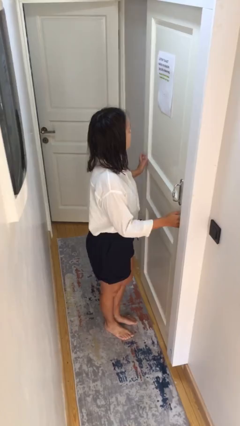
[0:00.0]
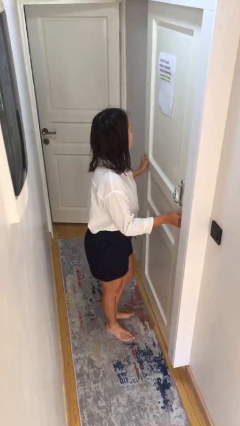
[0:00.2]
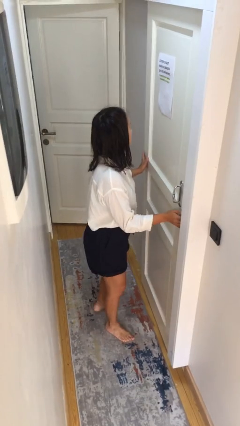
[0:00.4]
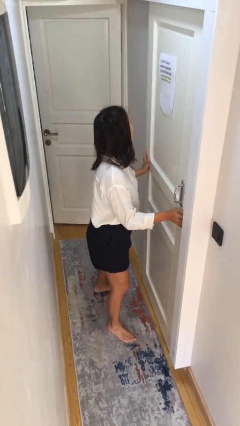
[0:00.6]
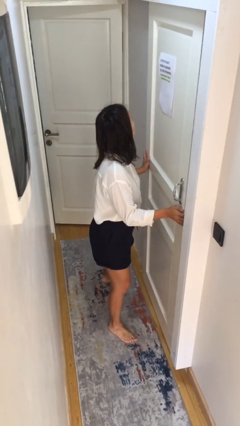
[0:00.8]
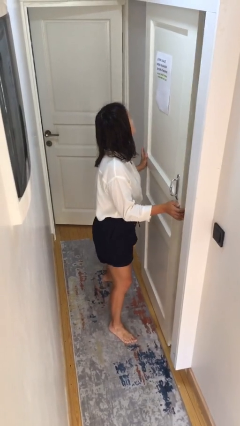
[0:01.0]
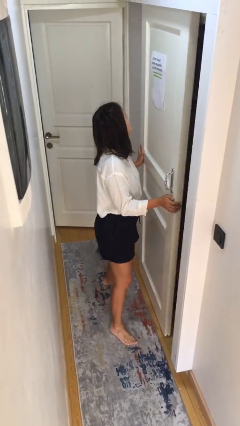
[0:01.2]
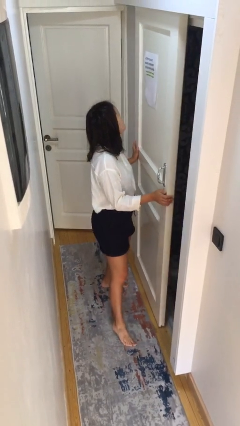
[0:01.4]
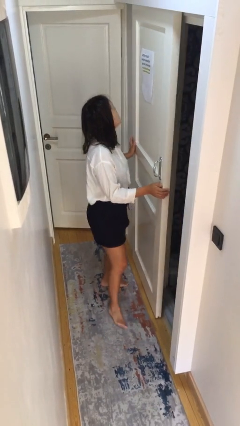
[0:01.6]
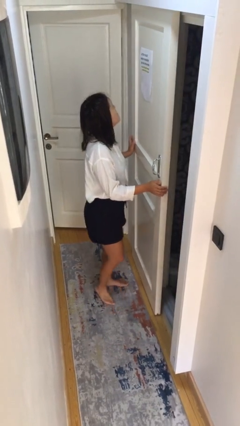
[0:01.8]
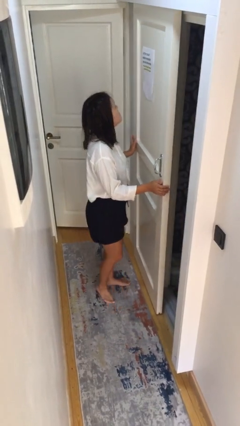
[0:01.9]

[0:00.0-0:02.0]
person opens sliding door

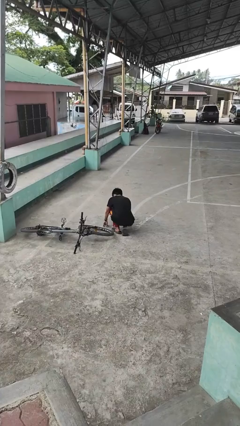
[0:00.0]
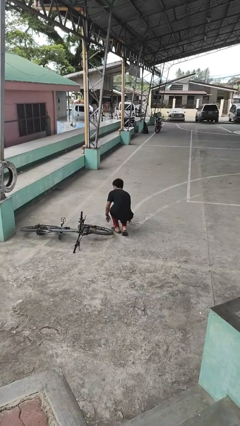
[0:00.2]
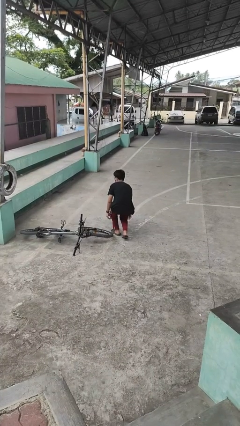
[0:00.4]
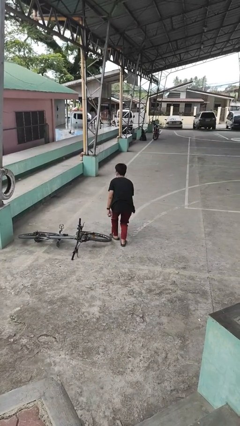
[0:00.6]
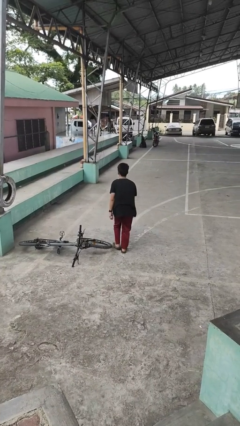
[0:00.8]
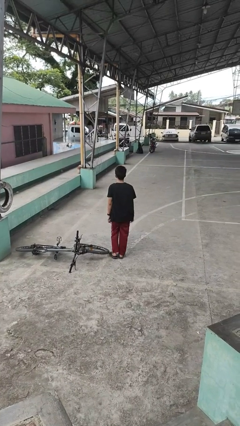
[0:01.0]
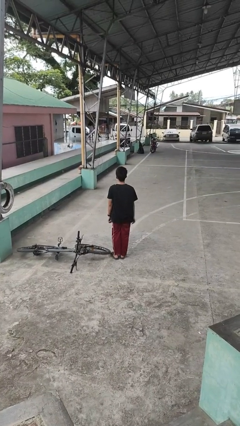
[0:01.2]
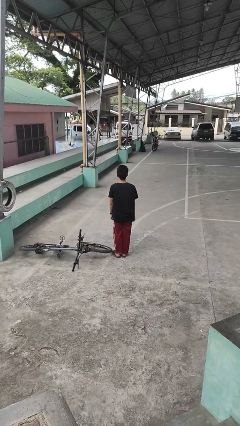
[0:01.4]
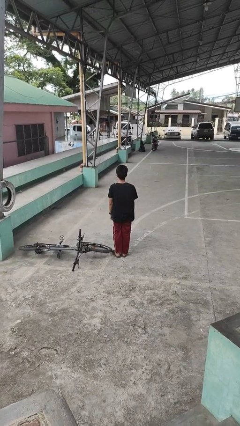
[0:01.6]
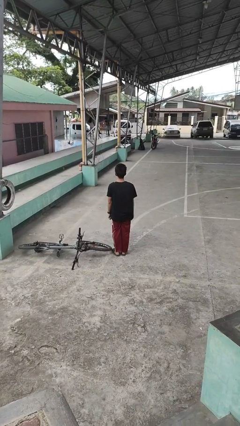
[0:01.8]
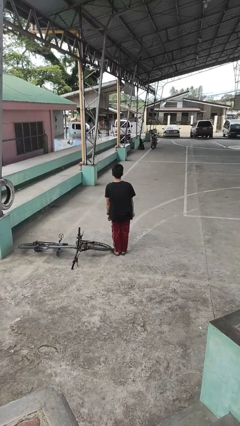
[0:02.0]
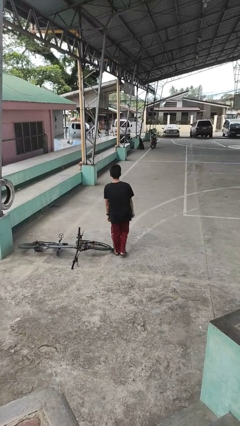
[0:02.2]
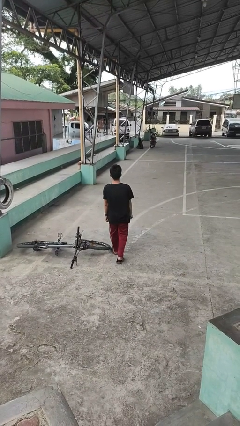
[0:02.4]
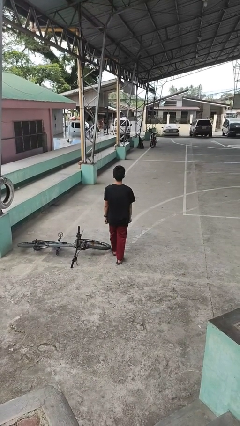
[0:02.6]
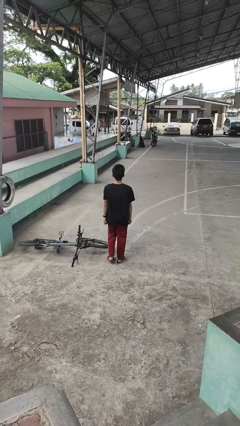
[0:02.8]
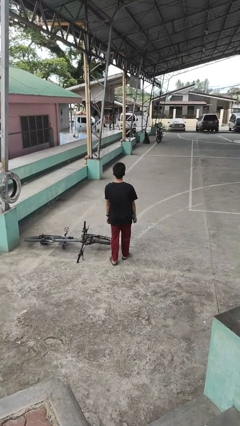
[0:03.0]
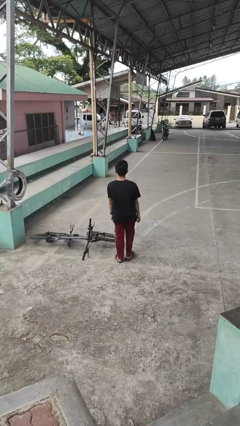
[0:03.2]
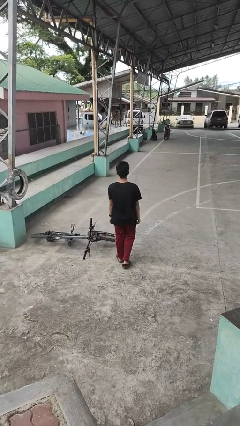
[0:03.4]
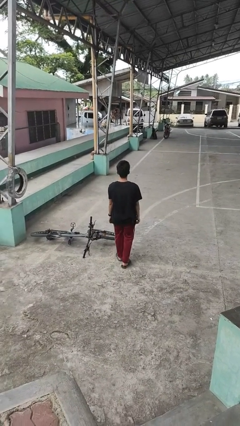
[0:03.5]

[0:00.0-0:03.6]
person stands up from floor

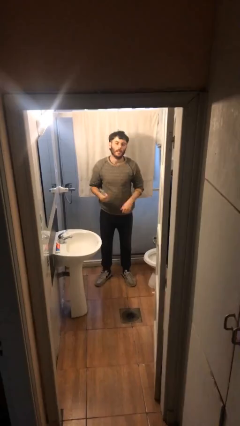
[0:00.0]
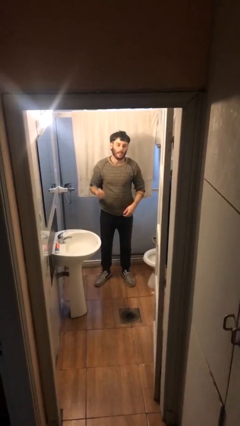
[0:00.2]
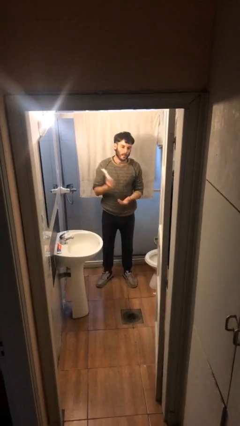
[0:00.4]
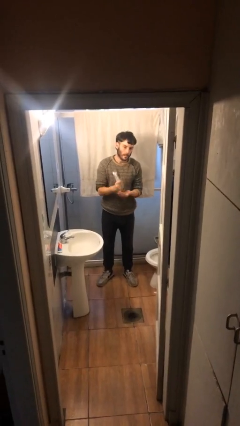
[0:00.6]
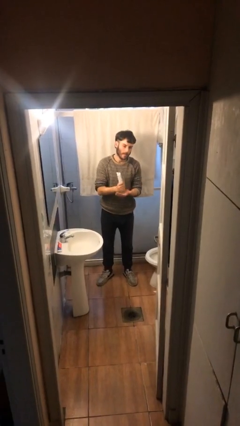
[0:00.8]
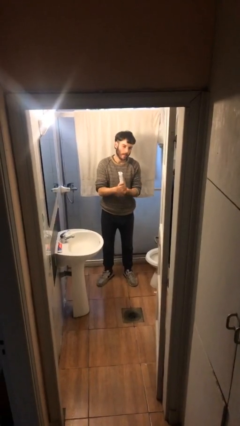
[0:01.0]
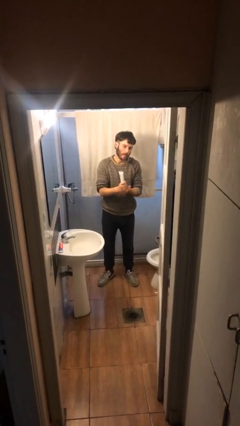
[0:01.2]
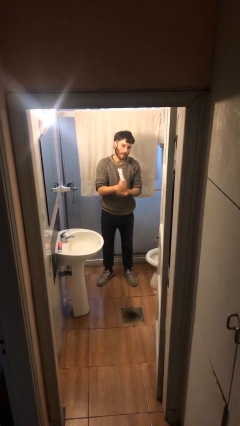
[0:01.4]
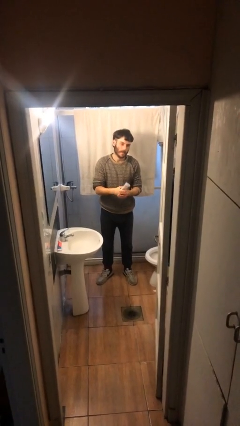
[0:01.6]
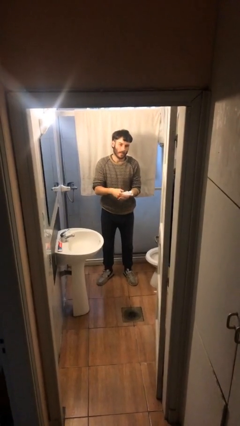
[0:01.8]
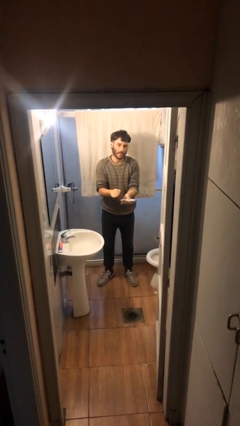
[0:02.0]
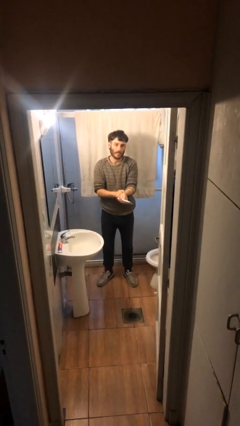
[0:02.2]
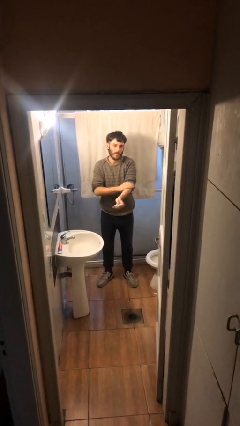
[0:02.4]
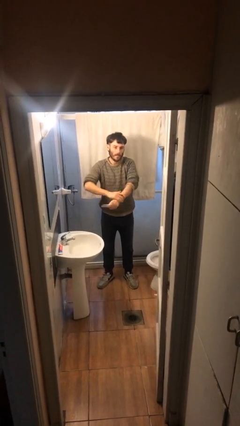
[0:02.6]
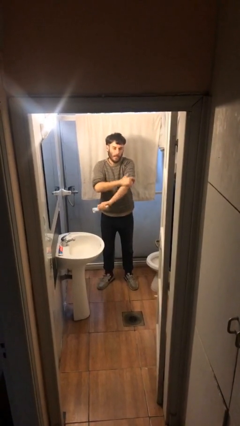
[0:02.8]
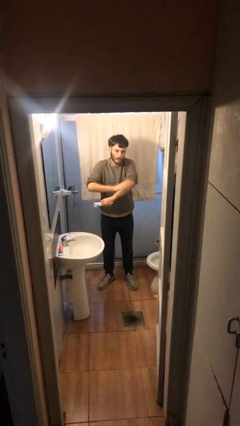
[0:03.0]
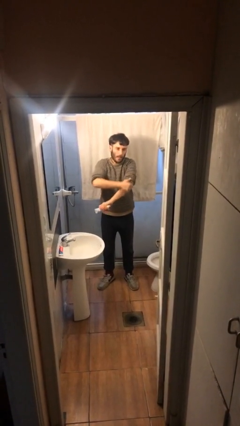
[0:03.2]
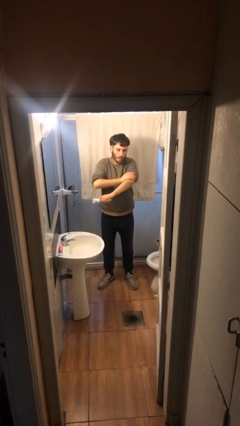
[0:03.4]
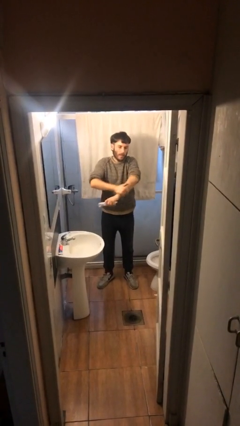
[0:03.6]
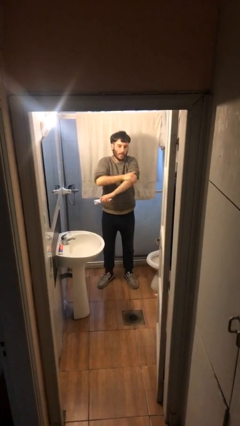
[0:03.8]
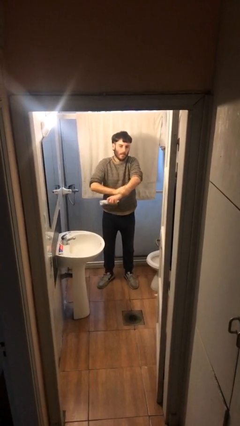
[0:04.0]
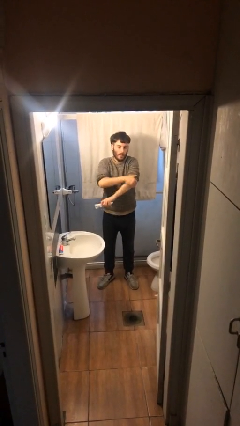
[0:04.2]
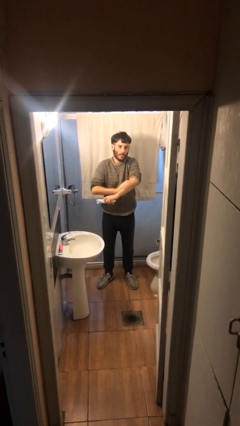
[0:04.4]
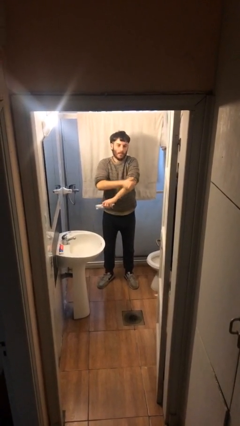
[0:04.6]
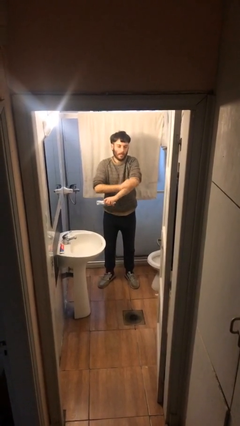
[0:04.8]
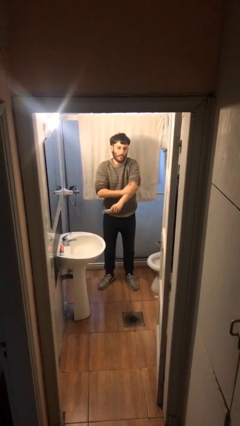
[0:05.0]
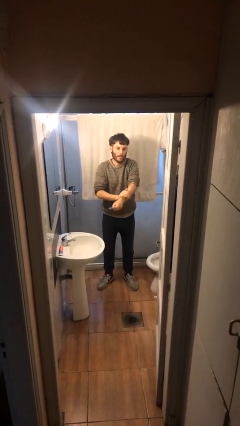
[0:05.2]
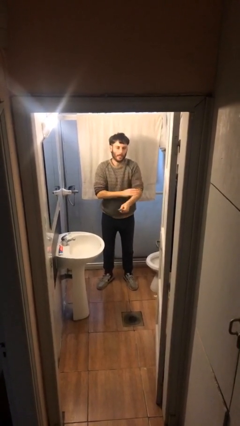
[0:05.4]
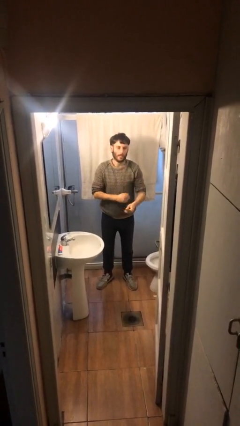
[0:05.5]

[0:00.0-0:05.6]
person applies sunscreen

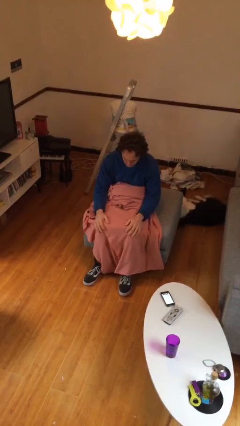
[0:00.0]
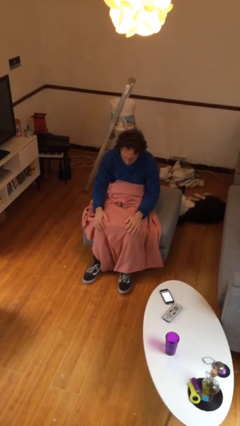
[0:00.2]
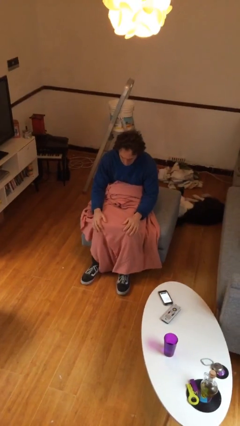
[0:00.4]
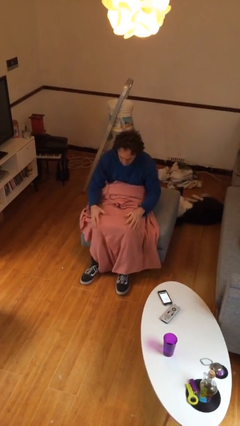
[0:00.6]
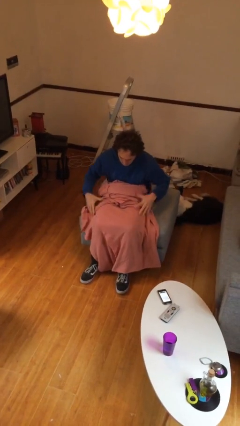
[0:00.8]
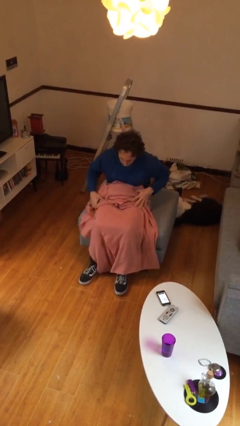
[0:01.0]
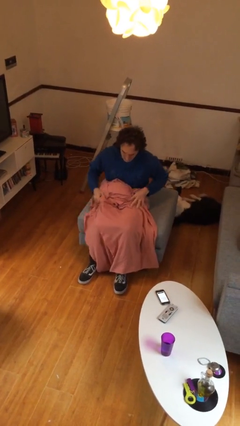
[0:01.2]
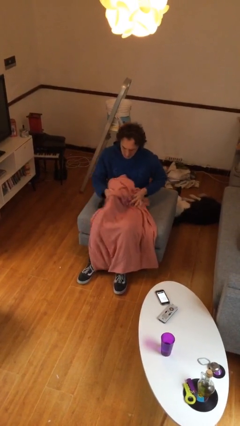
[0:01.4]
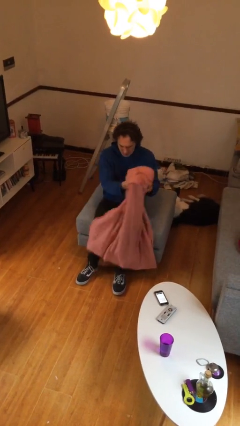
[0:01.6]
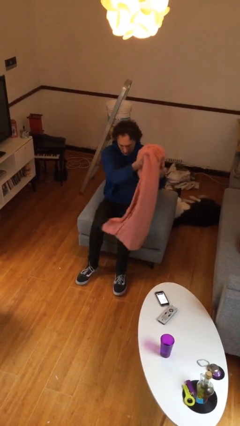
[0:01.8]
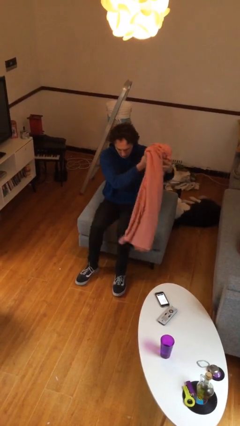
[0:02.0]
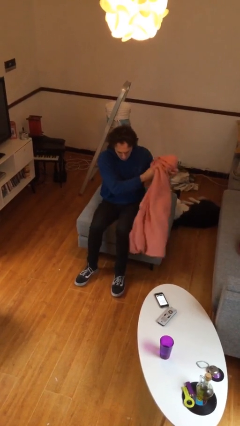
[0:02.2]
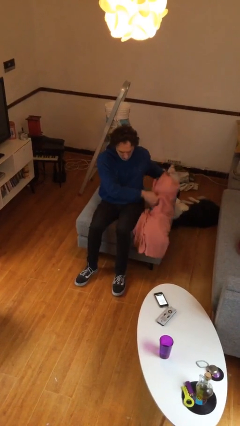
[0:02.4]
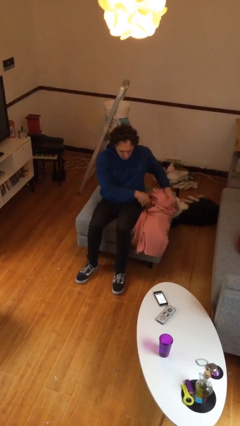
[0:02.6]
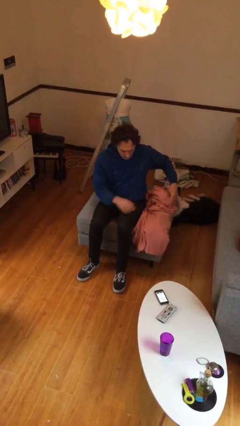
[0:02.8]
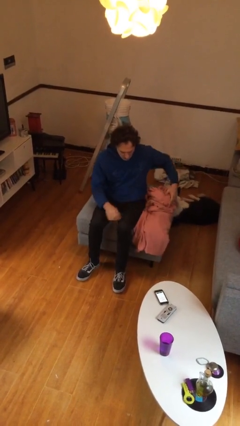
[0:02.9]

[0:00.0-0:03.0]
person uncovers with blanket

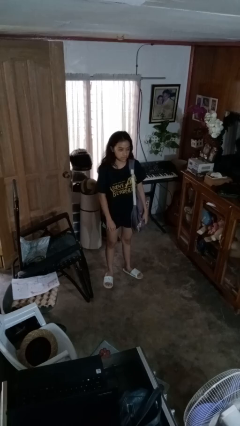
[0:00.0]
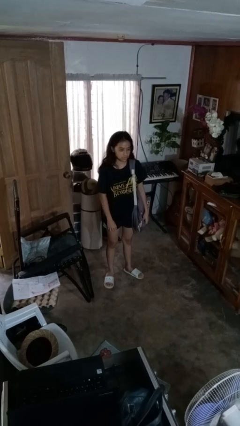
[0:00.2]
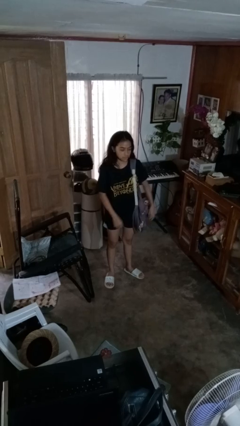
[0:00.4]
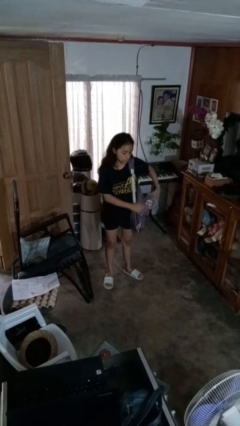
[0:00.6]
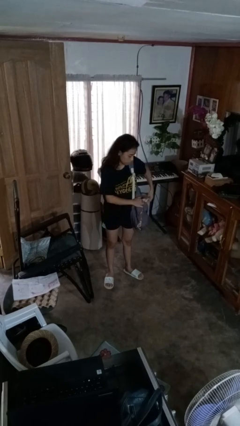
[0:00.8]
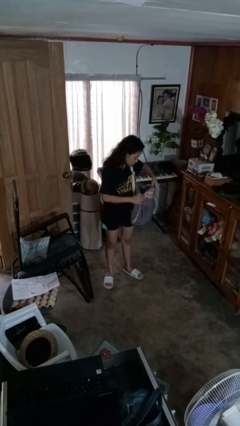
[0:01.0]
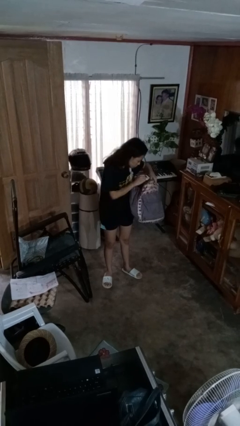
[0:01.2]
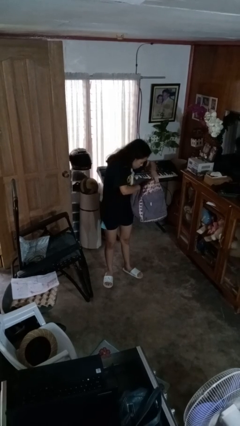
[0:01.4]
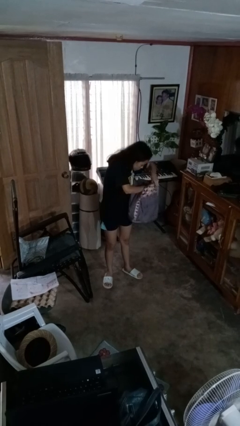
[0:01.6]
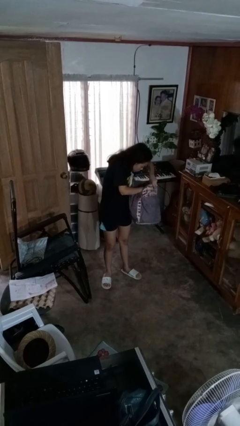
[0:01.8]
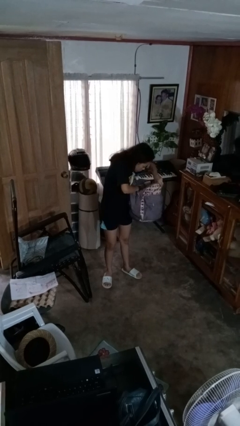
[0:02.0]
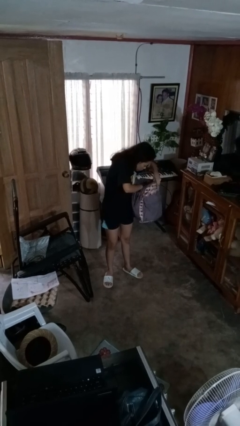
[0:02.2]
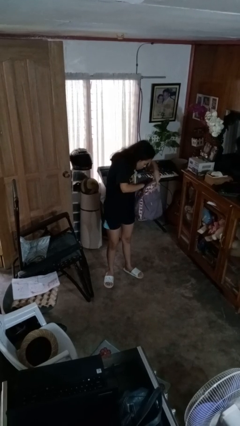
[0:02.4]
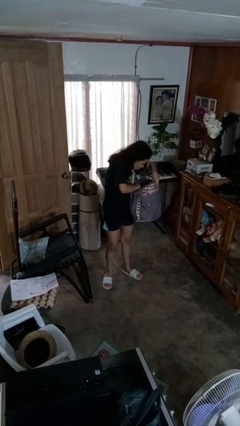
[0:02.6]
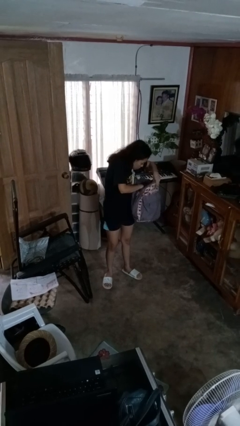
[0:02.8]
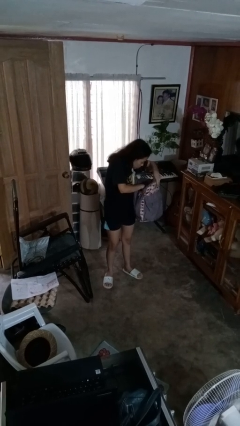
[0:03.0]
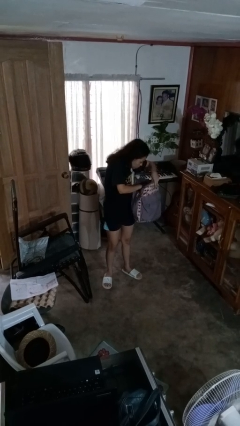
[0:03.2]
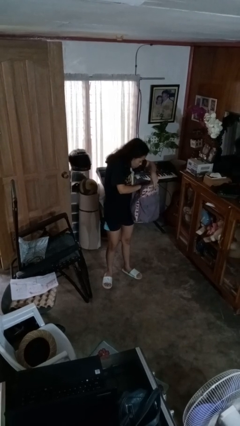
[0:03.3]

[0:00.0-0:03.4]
person searches in backpack
